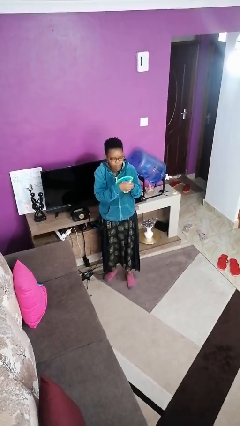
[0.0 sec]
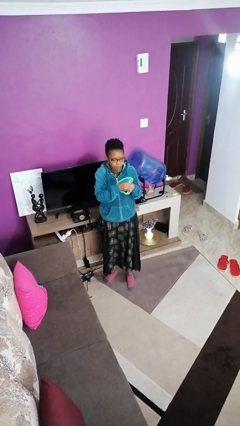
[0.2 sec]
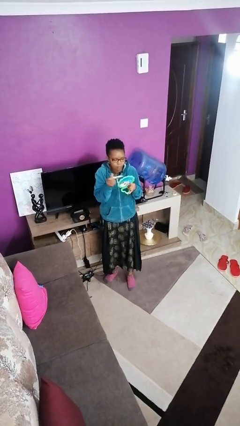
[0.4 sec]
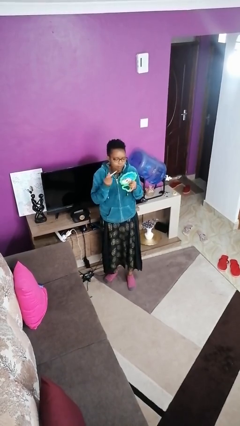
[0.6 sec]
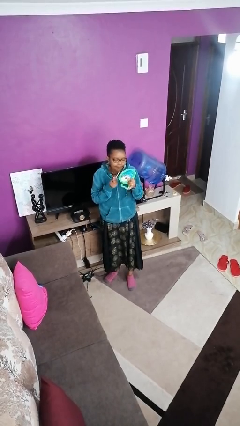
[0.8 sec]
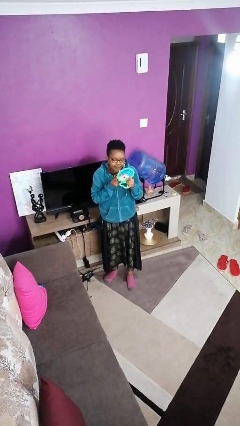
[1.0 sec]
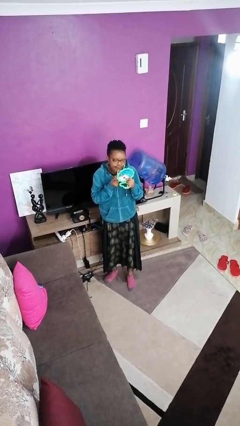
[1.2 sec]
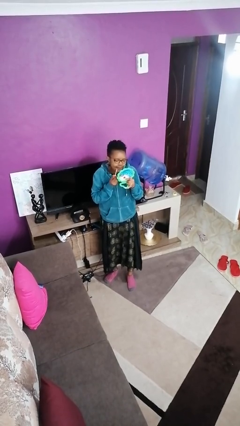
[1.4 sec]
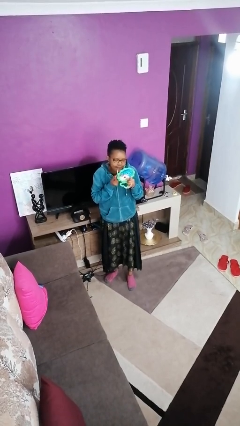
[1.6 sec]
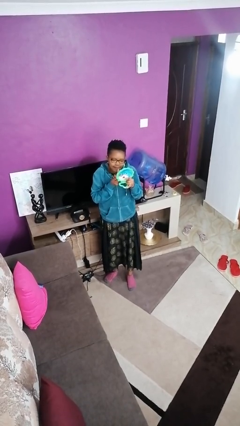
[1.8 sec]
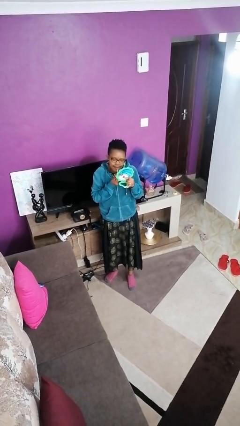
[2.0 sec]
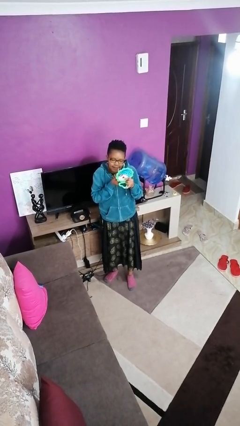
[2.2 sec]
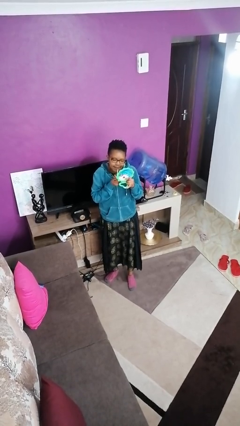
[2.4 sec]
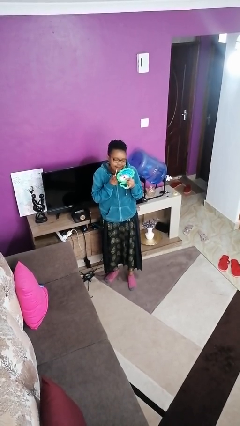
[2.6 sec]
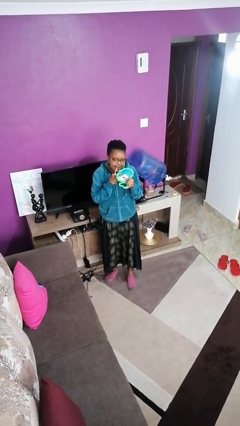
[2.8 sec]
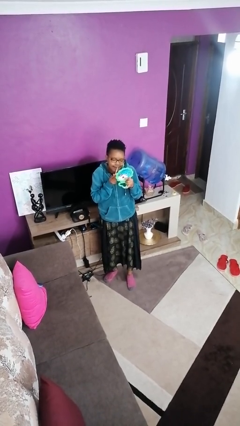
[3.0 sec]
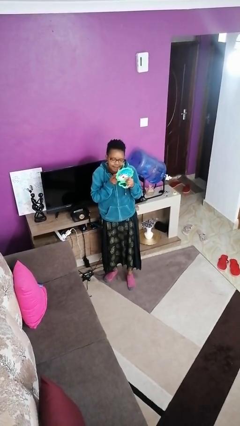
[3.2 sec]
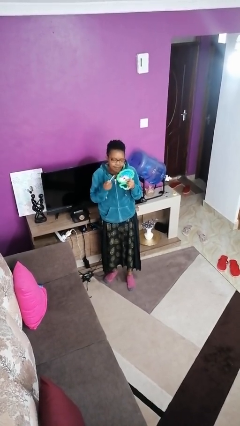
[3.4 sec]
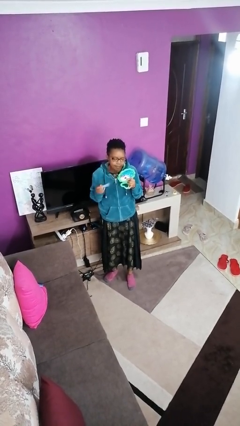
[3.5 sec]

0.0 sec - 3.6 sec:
person applies lip makeup

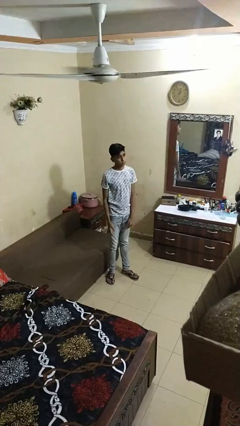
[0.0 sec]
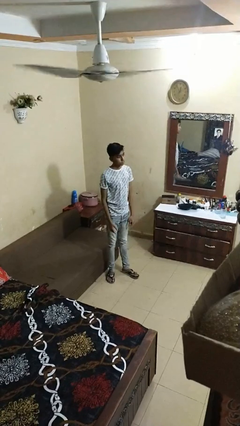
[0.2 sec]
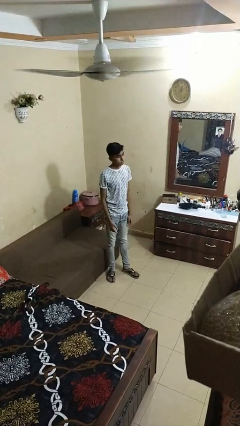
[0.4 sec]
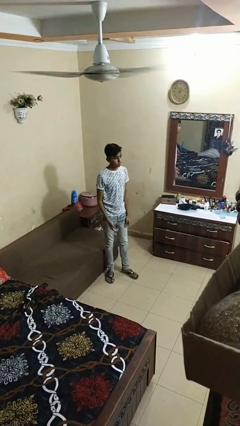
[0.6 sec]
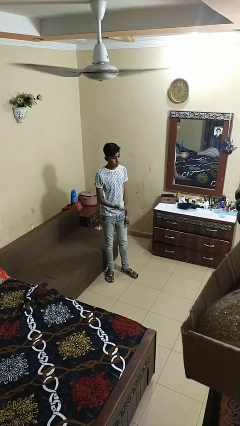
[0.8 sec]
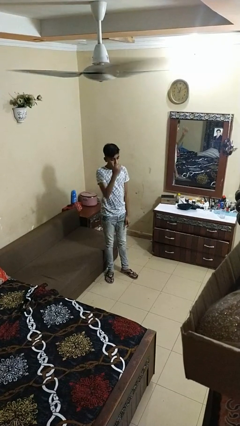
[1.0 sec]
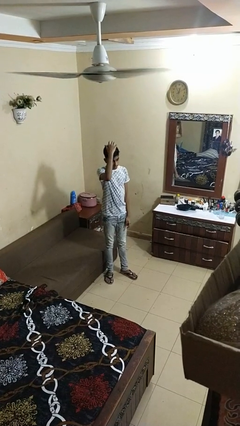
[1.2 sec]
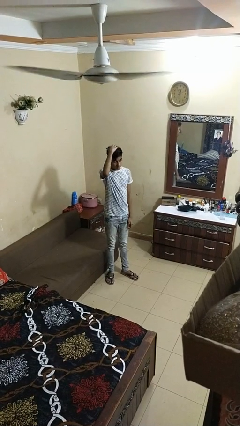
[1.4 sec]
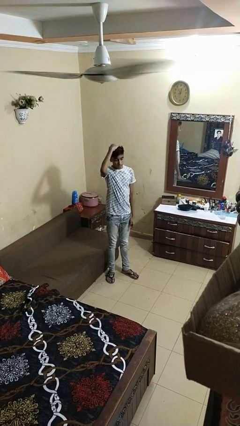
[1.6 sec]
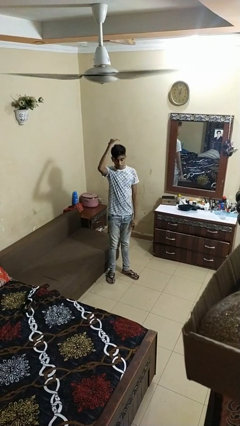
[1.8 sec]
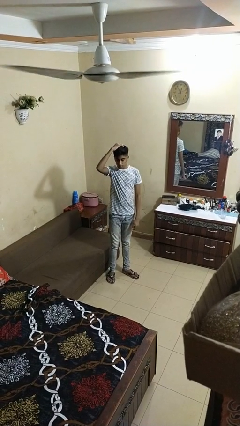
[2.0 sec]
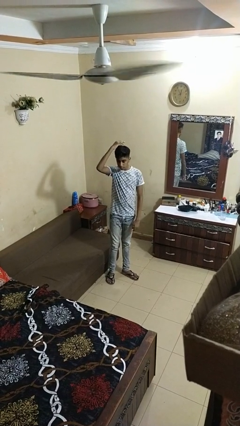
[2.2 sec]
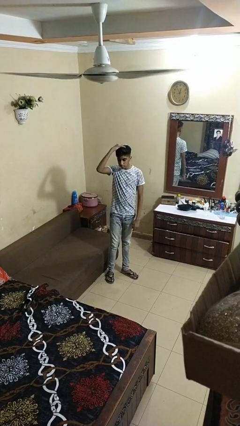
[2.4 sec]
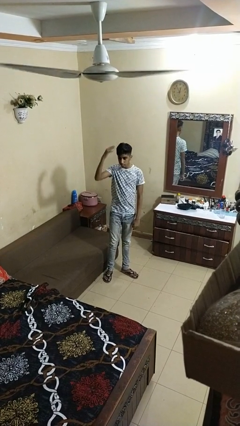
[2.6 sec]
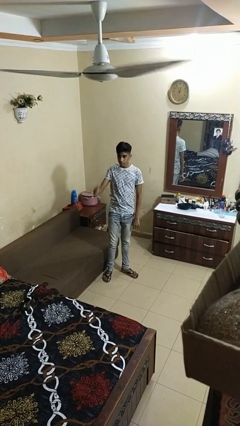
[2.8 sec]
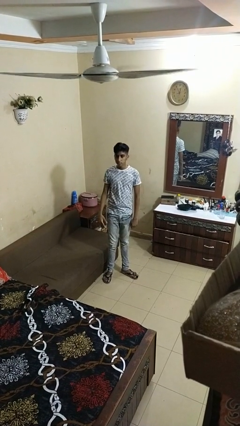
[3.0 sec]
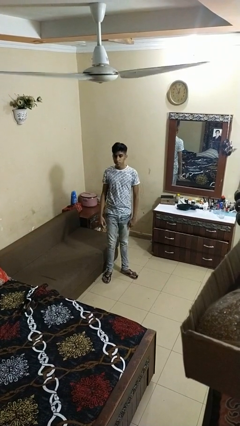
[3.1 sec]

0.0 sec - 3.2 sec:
person pats head

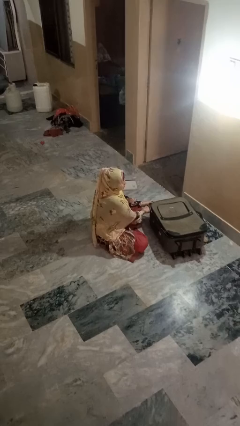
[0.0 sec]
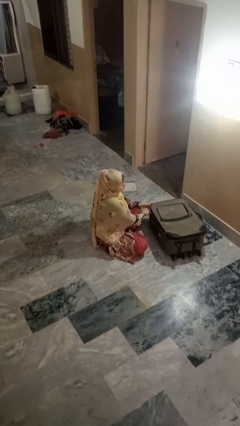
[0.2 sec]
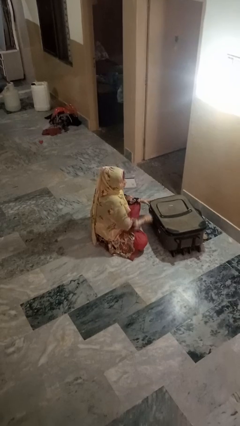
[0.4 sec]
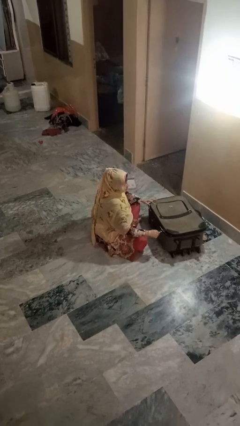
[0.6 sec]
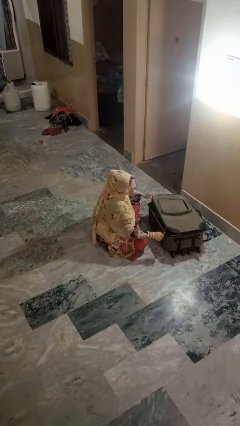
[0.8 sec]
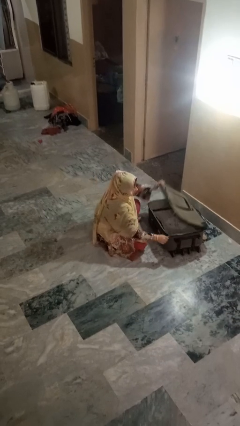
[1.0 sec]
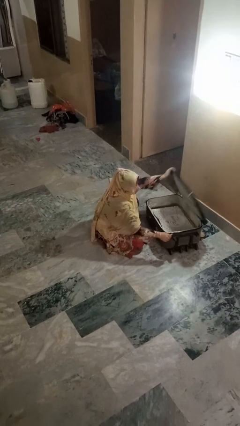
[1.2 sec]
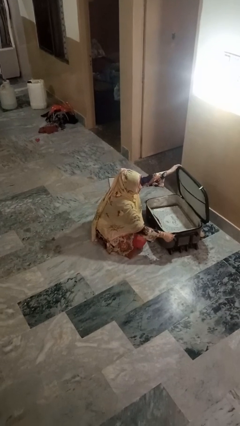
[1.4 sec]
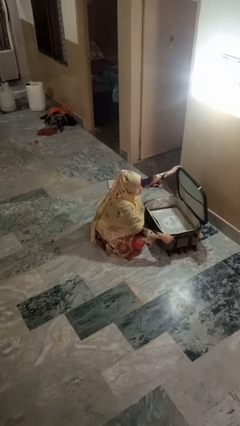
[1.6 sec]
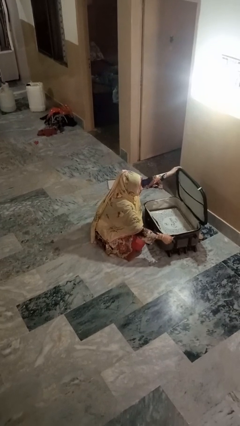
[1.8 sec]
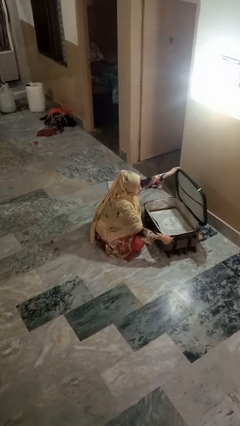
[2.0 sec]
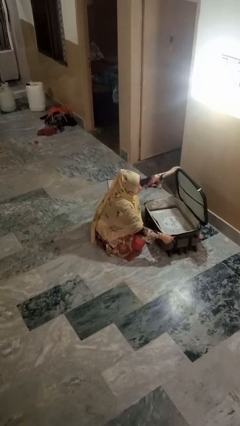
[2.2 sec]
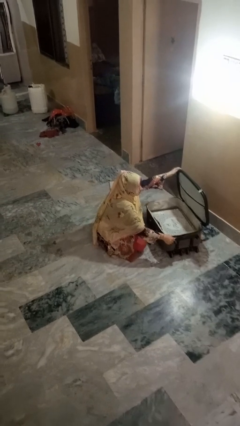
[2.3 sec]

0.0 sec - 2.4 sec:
person opens suitcase

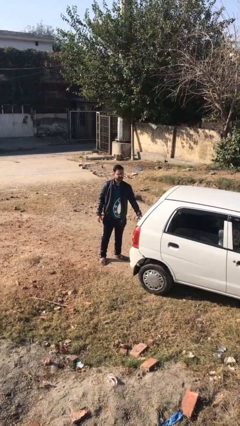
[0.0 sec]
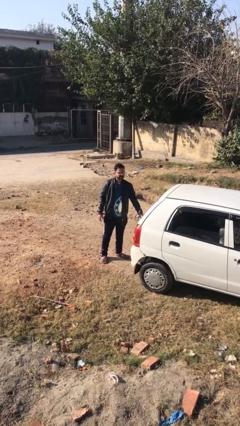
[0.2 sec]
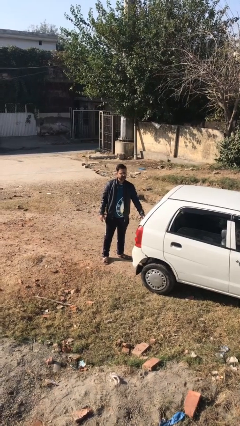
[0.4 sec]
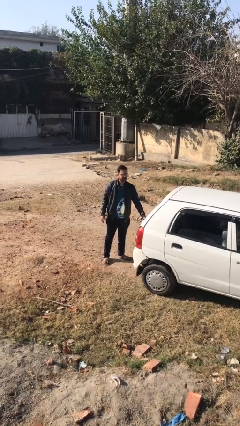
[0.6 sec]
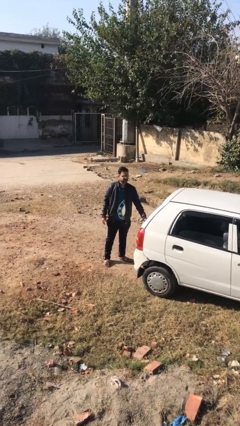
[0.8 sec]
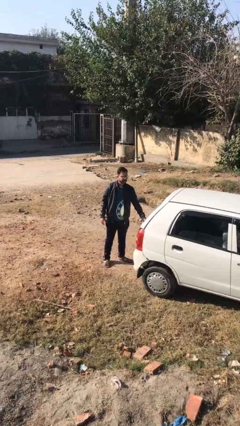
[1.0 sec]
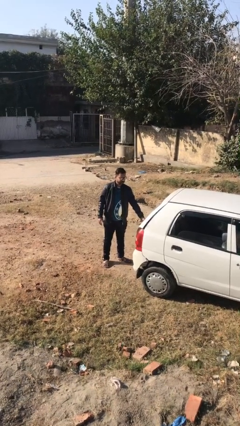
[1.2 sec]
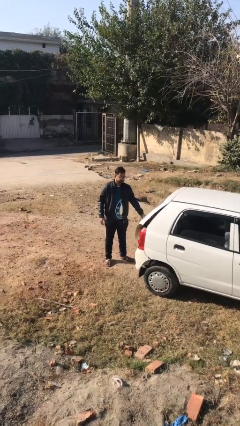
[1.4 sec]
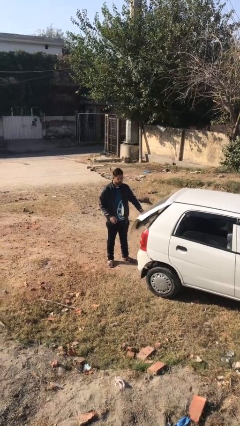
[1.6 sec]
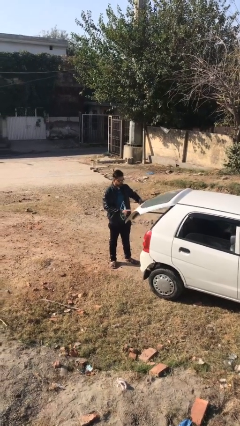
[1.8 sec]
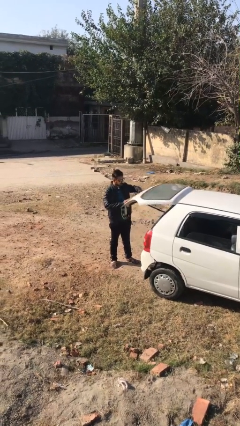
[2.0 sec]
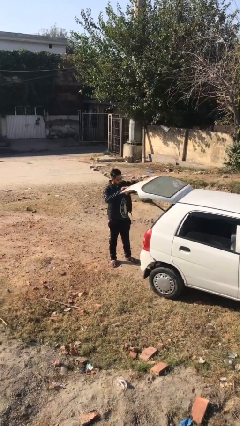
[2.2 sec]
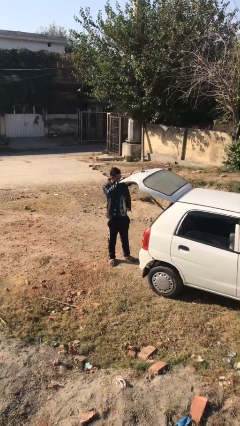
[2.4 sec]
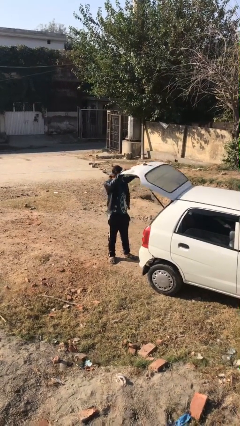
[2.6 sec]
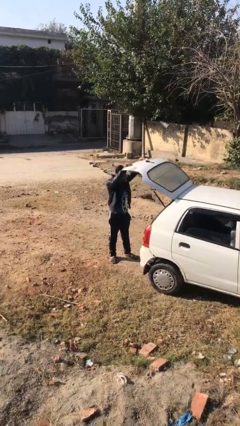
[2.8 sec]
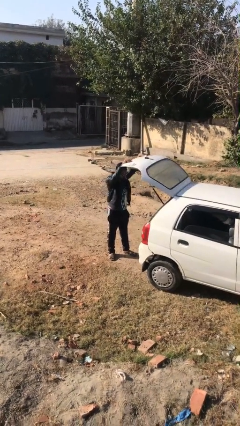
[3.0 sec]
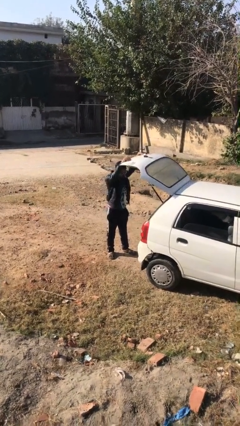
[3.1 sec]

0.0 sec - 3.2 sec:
person opens car trunk

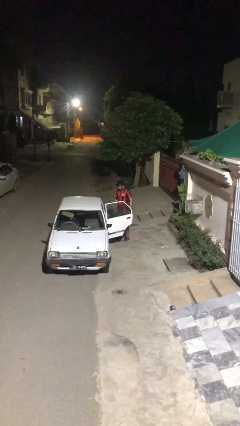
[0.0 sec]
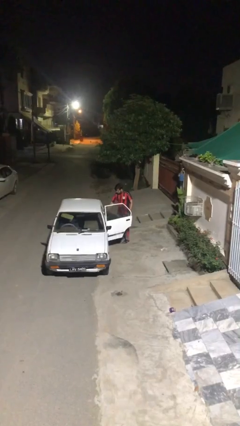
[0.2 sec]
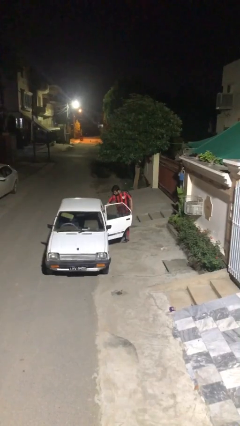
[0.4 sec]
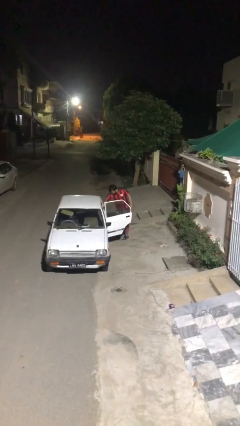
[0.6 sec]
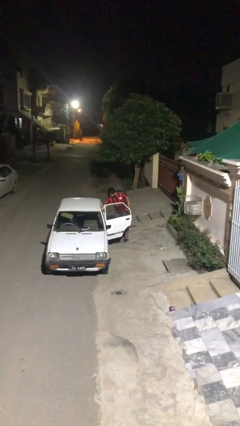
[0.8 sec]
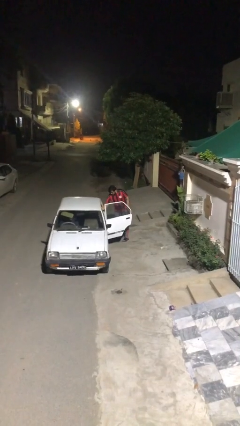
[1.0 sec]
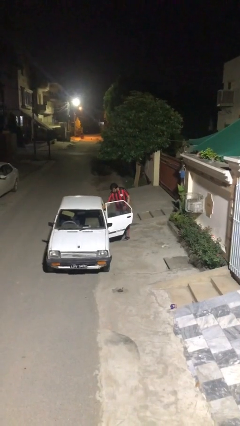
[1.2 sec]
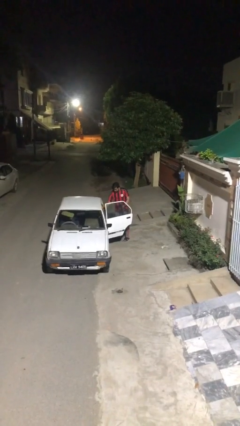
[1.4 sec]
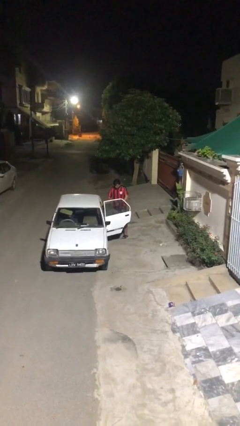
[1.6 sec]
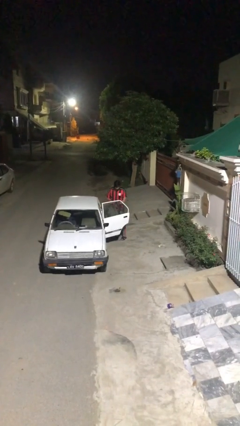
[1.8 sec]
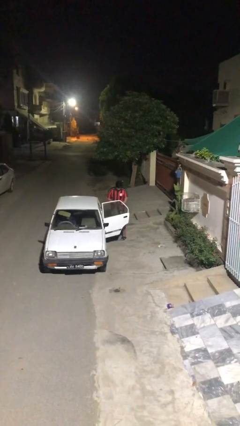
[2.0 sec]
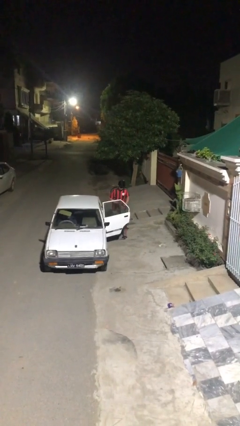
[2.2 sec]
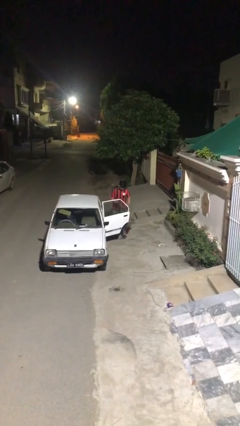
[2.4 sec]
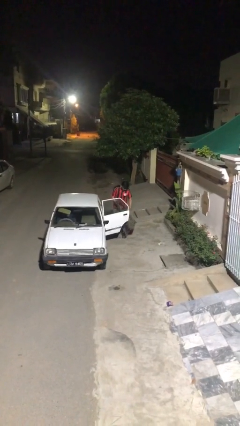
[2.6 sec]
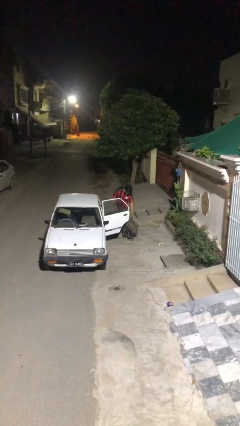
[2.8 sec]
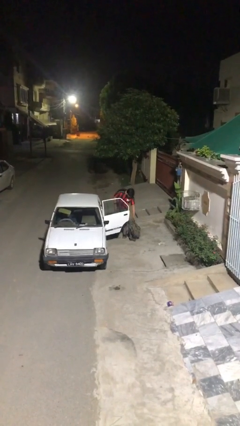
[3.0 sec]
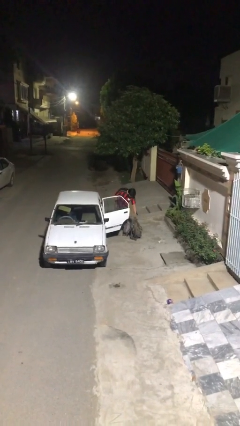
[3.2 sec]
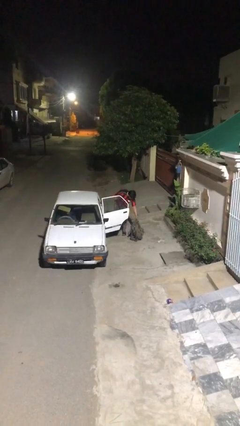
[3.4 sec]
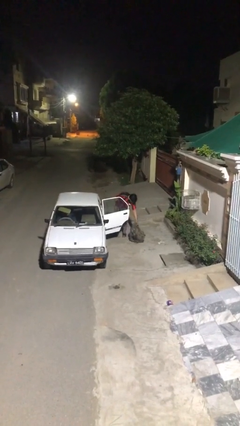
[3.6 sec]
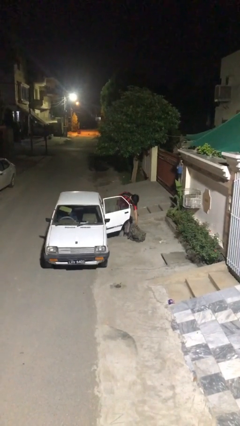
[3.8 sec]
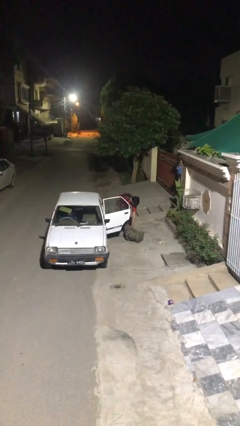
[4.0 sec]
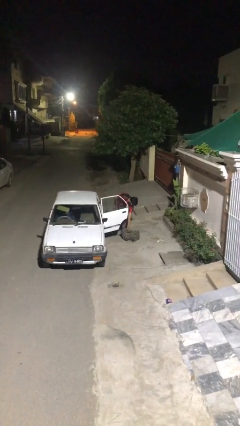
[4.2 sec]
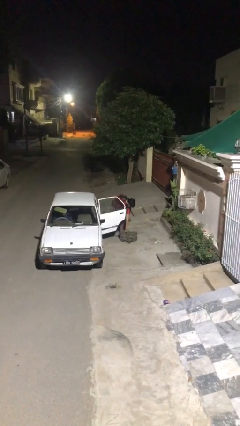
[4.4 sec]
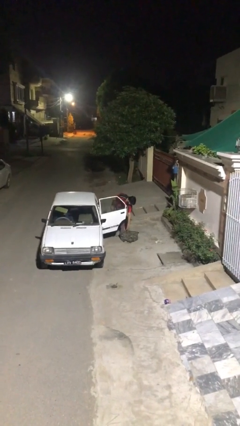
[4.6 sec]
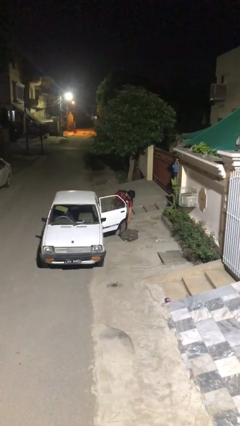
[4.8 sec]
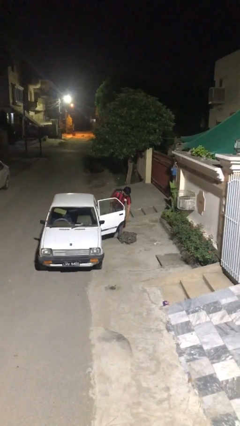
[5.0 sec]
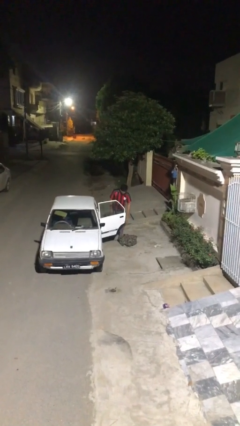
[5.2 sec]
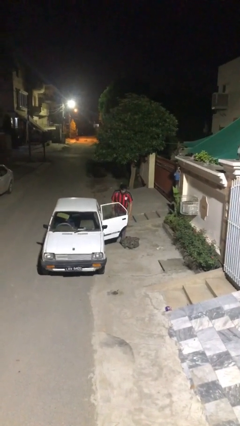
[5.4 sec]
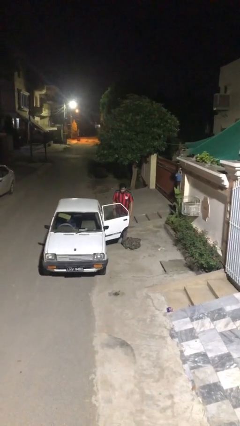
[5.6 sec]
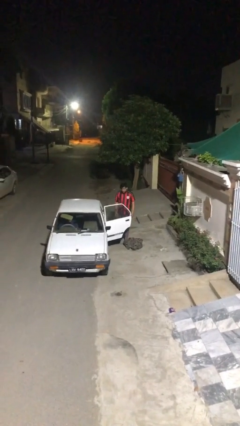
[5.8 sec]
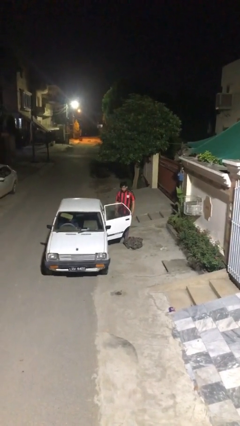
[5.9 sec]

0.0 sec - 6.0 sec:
person unloads car
